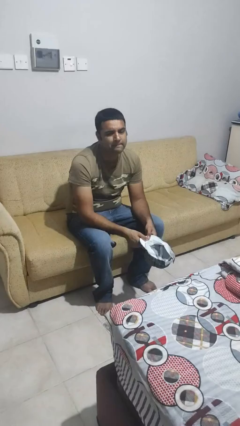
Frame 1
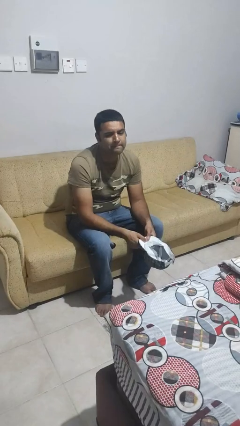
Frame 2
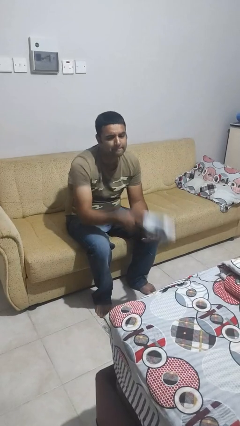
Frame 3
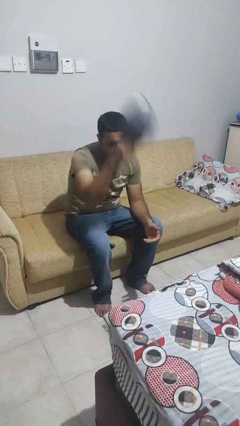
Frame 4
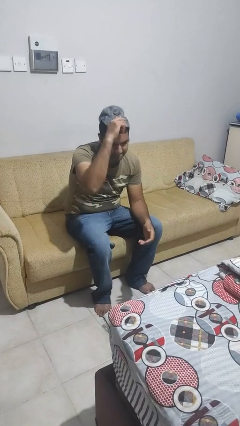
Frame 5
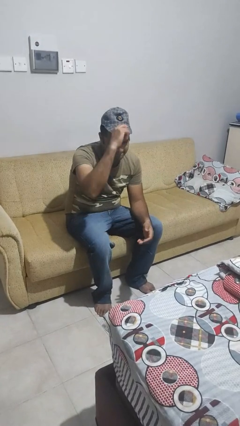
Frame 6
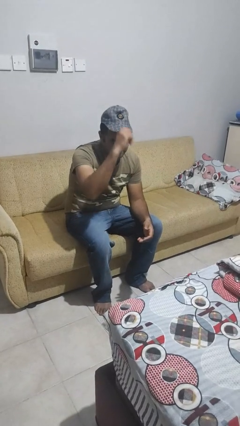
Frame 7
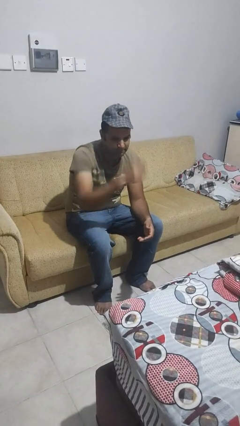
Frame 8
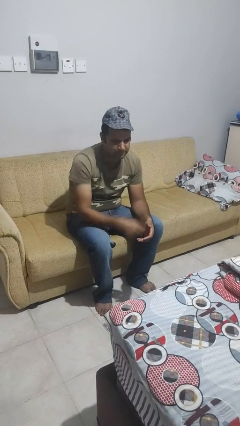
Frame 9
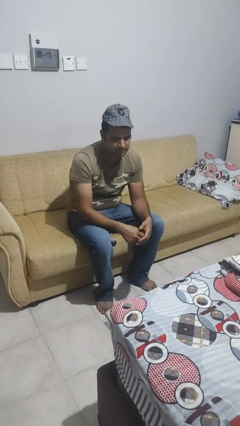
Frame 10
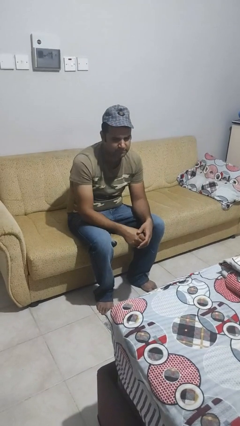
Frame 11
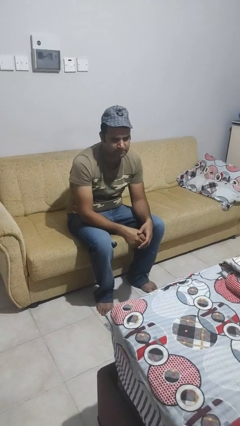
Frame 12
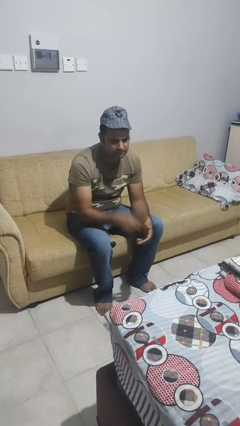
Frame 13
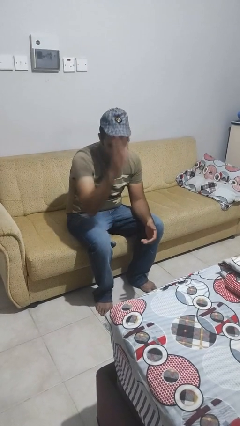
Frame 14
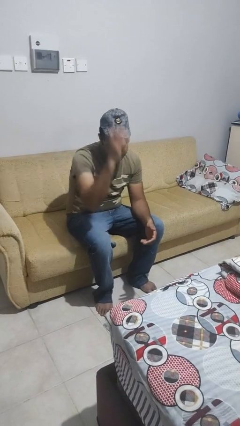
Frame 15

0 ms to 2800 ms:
person puts on hat

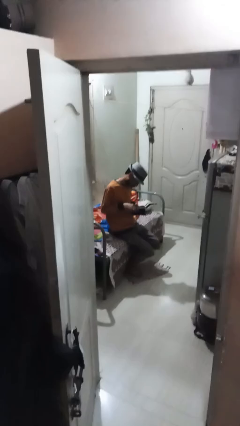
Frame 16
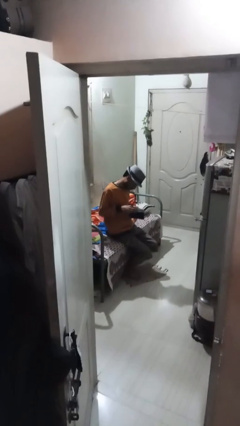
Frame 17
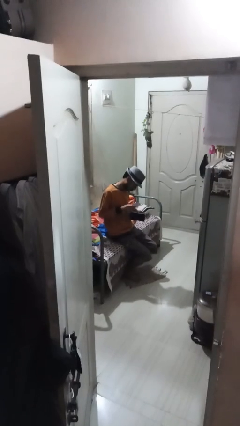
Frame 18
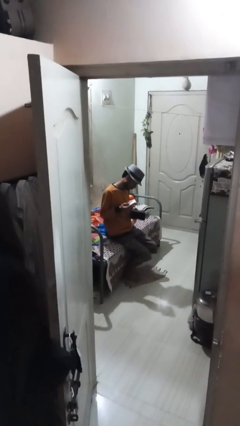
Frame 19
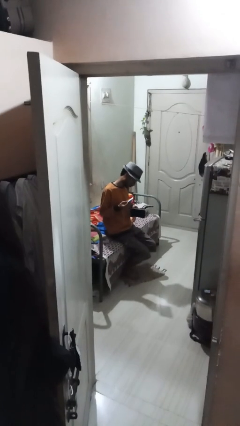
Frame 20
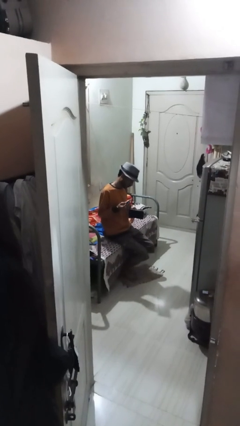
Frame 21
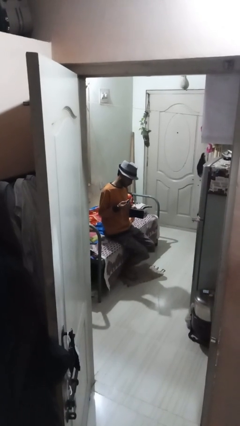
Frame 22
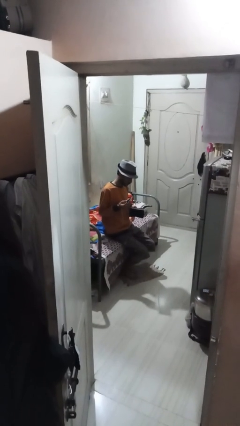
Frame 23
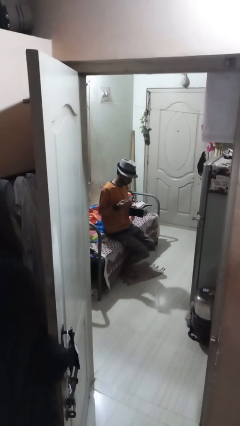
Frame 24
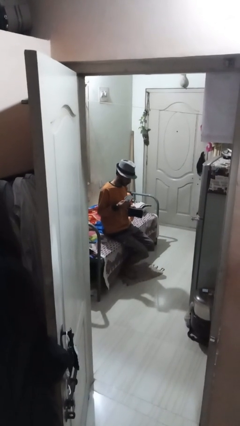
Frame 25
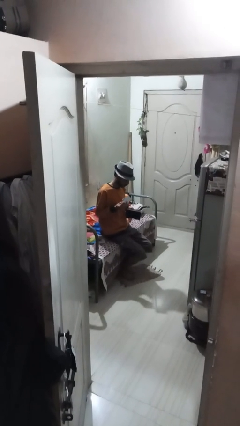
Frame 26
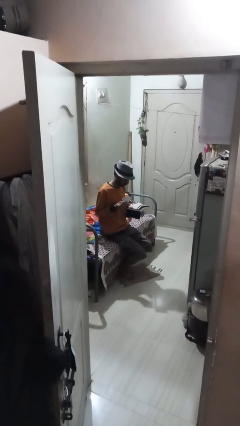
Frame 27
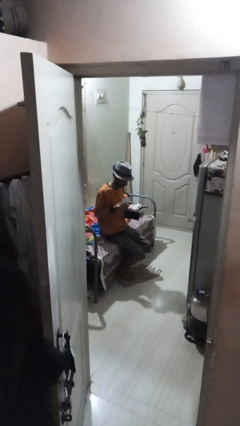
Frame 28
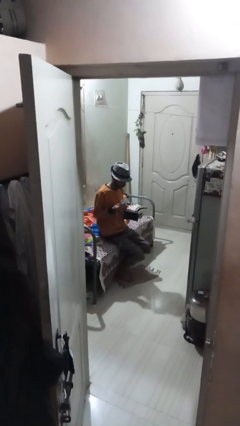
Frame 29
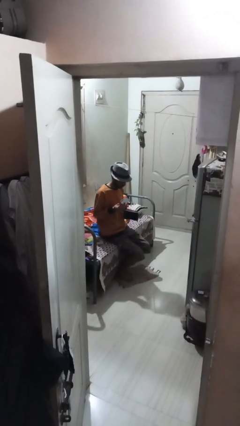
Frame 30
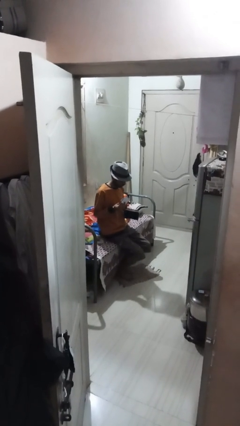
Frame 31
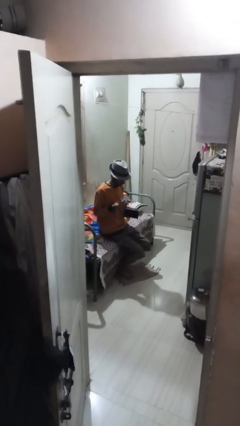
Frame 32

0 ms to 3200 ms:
person takes object from purse

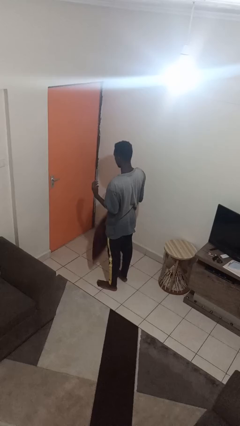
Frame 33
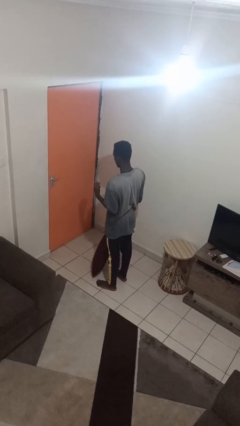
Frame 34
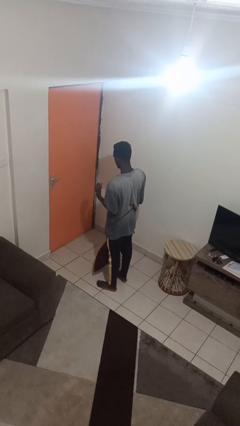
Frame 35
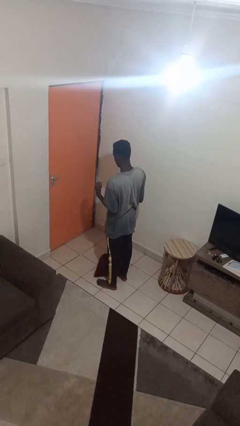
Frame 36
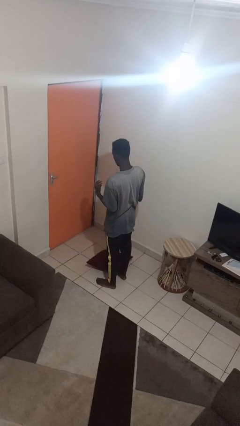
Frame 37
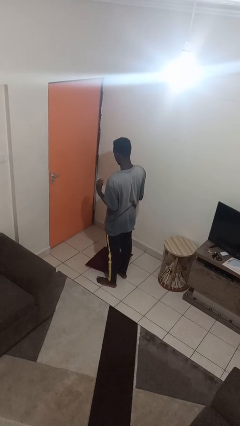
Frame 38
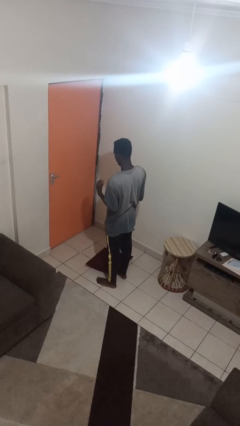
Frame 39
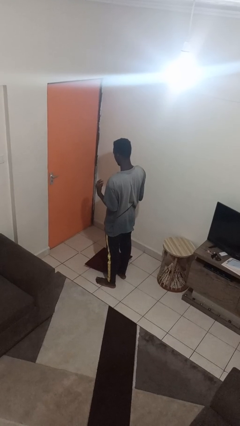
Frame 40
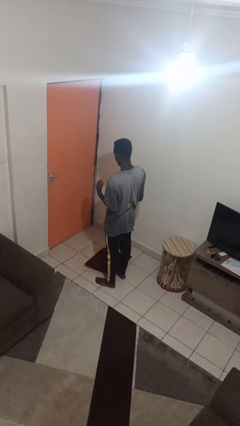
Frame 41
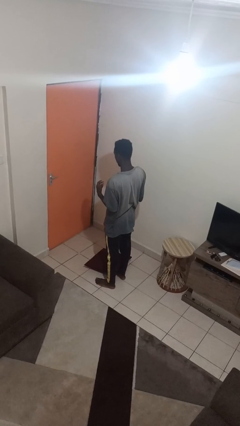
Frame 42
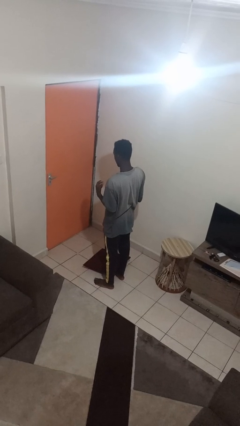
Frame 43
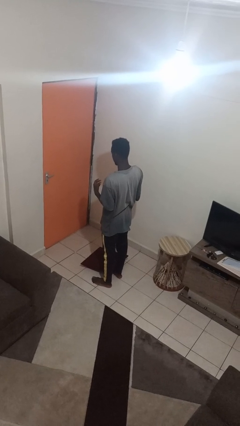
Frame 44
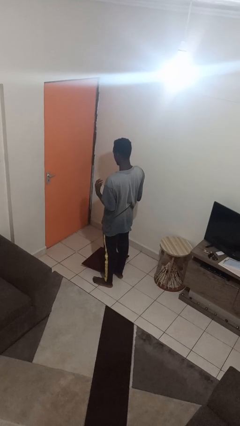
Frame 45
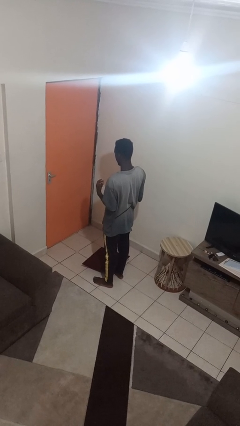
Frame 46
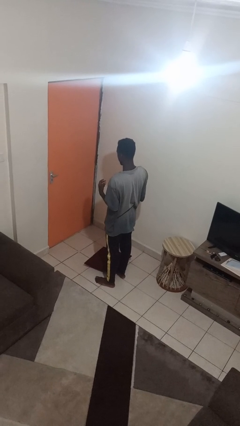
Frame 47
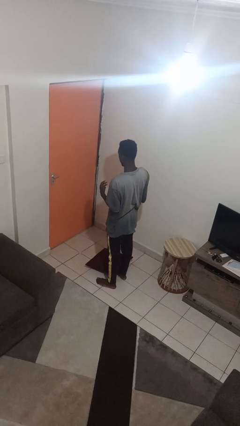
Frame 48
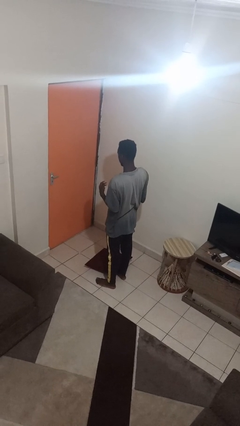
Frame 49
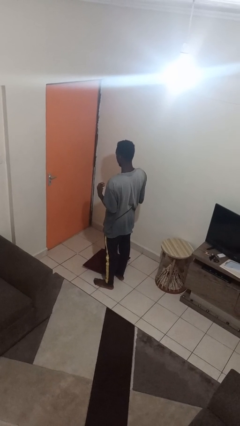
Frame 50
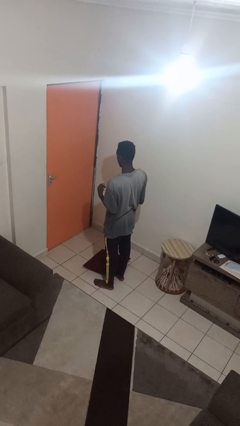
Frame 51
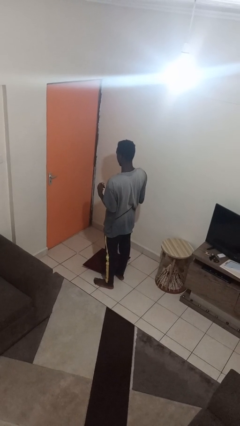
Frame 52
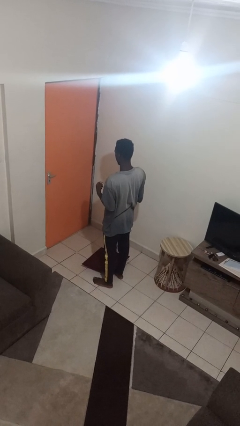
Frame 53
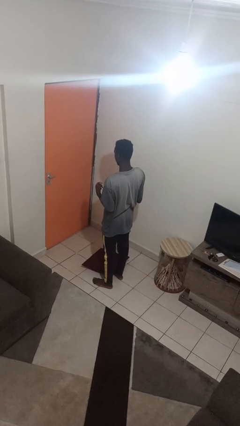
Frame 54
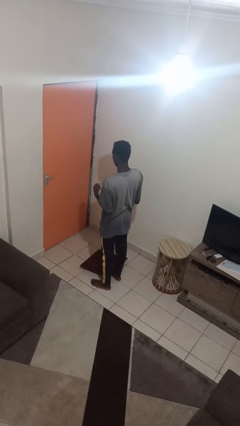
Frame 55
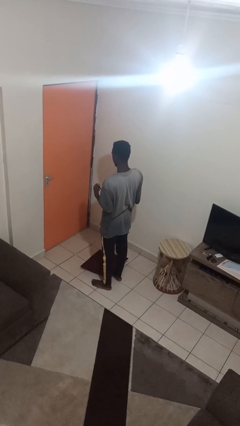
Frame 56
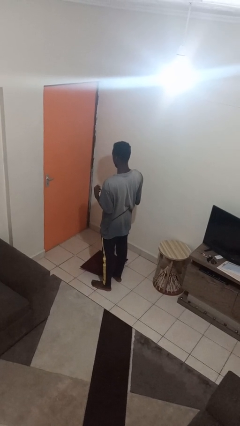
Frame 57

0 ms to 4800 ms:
person drops object

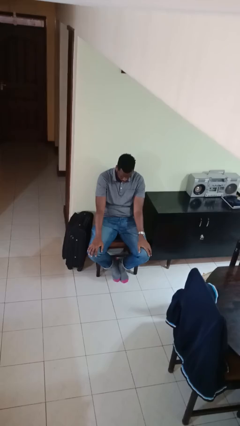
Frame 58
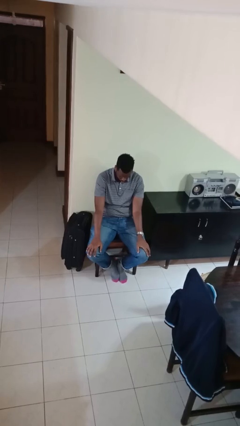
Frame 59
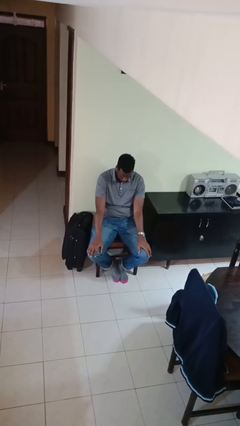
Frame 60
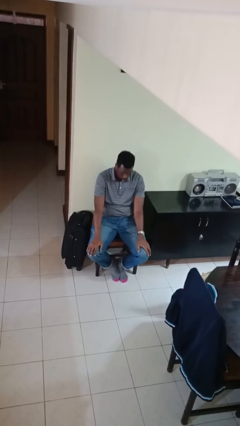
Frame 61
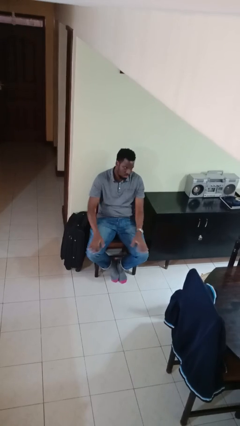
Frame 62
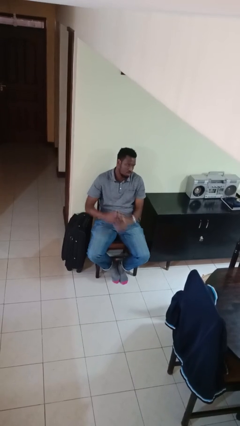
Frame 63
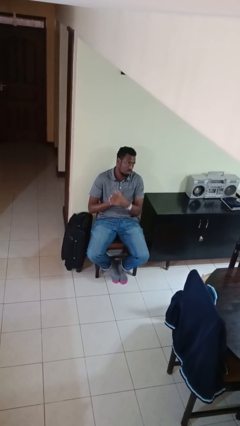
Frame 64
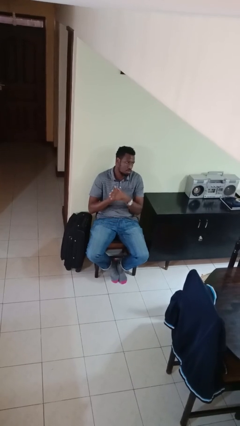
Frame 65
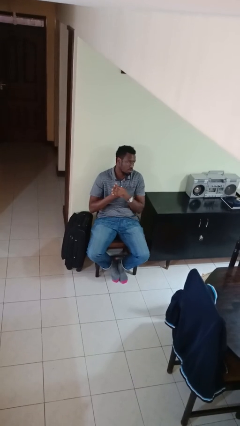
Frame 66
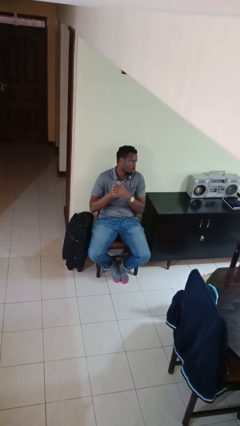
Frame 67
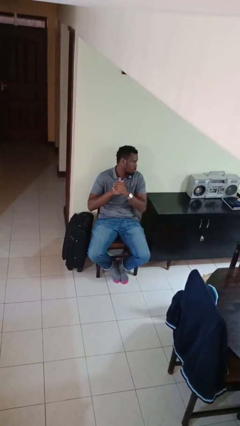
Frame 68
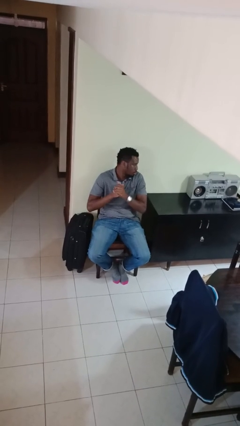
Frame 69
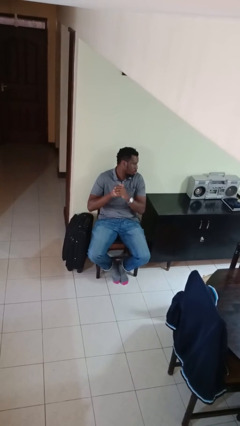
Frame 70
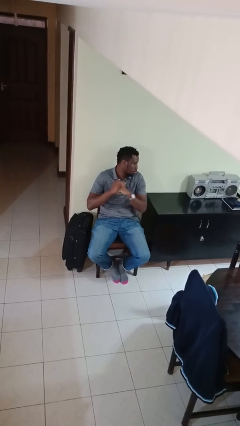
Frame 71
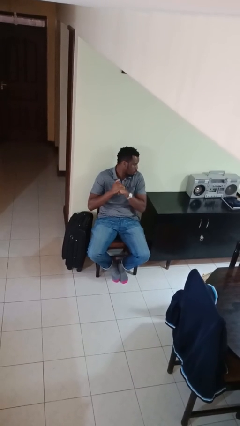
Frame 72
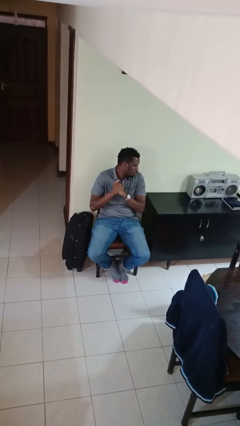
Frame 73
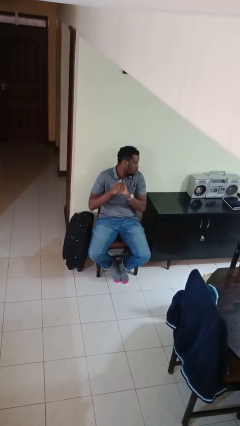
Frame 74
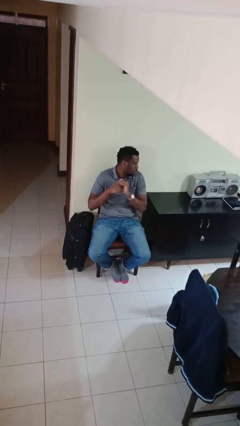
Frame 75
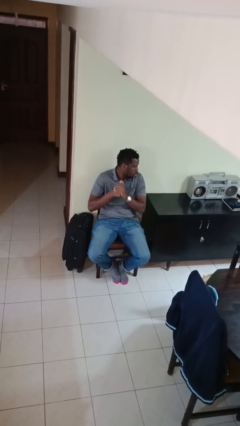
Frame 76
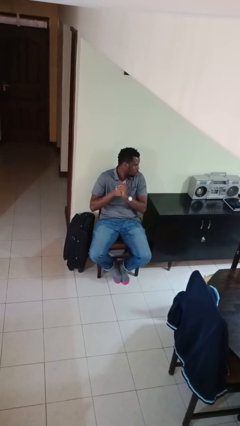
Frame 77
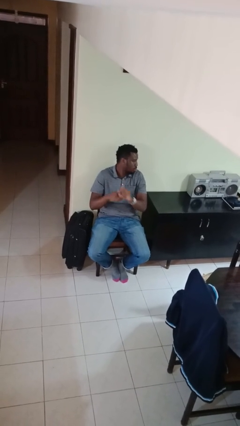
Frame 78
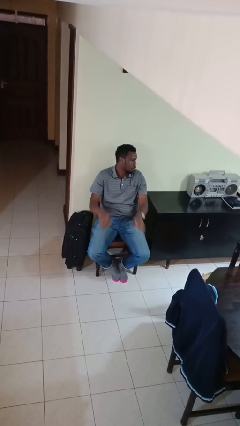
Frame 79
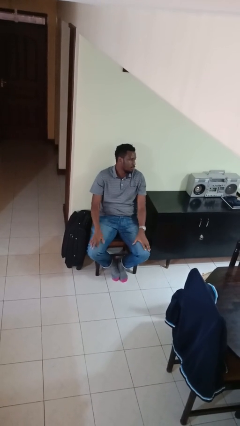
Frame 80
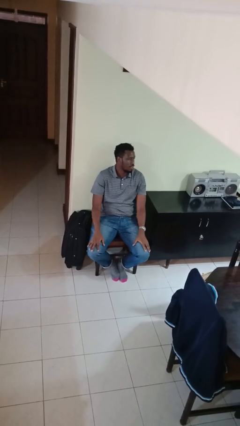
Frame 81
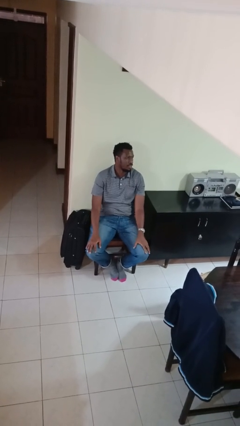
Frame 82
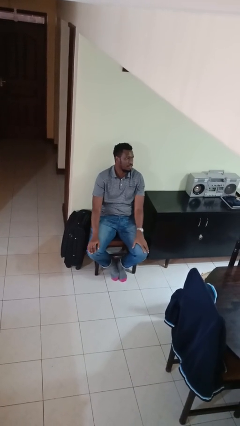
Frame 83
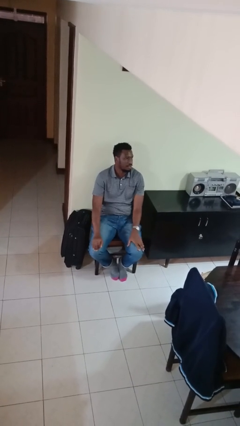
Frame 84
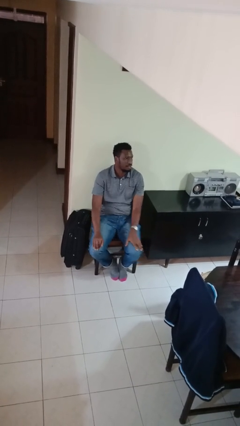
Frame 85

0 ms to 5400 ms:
person cracks knuckles

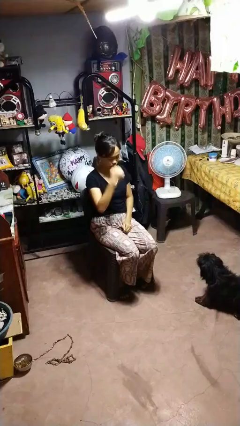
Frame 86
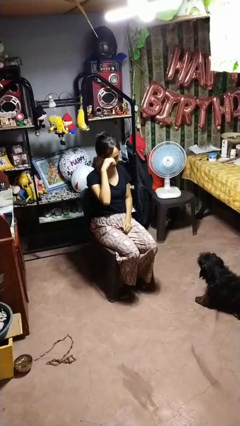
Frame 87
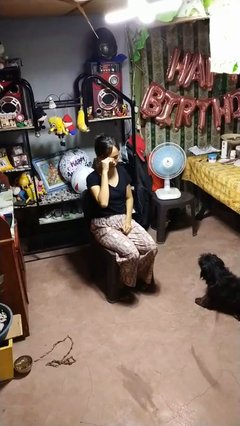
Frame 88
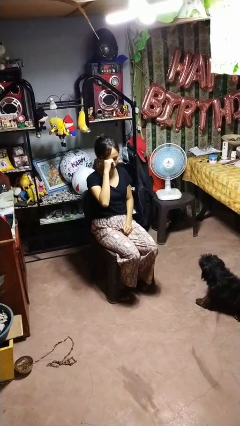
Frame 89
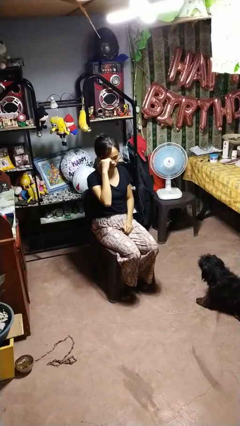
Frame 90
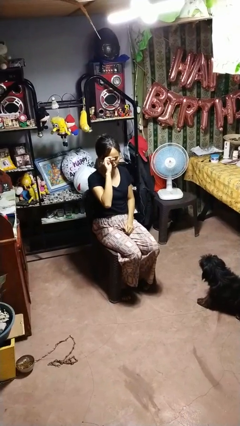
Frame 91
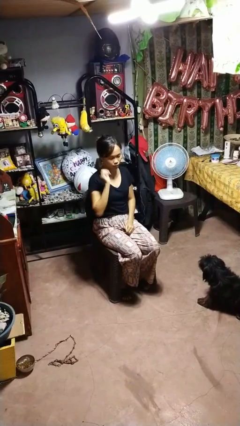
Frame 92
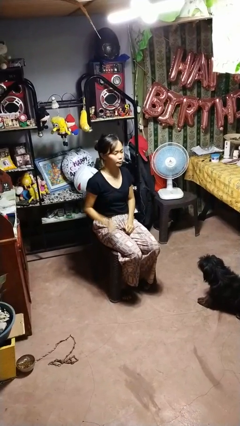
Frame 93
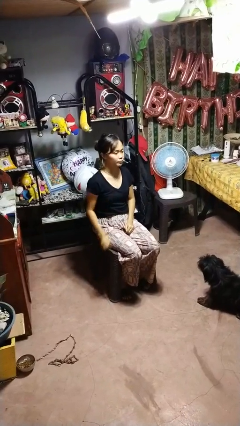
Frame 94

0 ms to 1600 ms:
person rubs eyes
